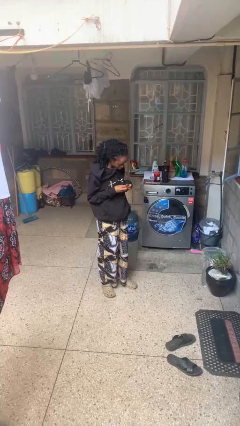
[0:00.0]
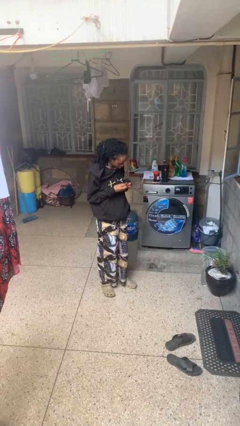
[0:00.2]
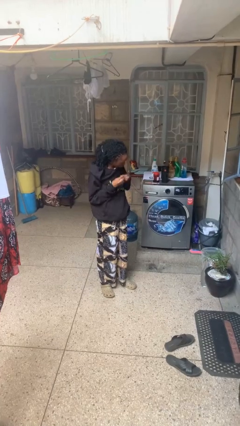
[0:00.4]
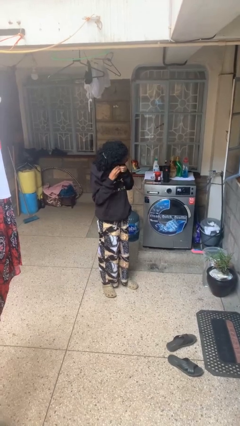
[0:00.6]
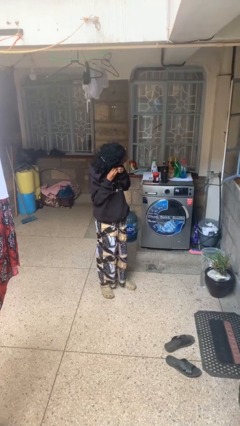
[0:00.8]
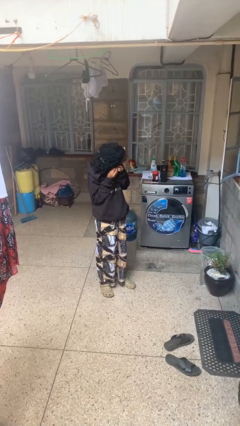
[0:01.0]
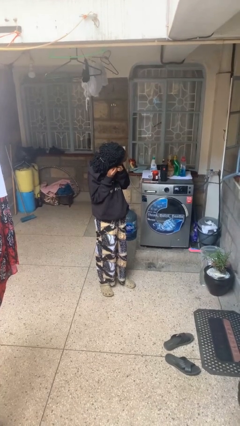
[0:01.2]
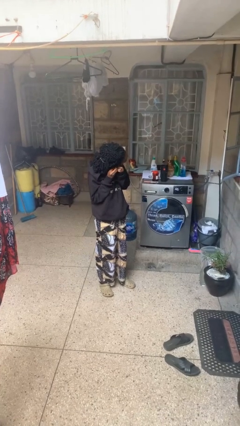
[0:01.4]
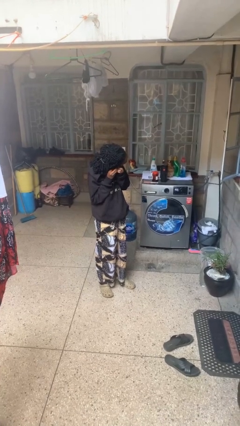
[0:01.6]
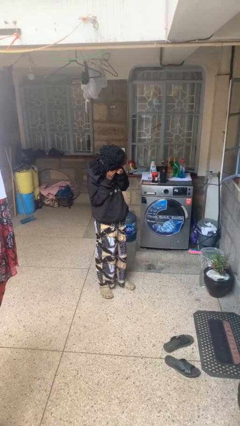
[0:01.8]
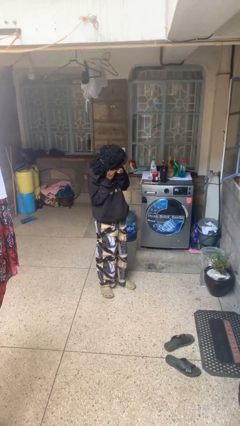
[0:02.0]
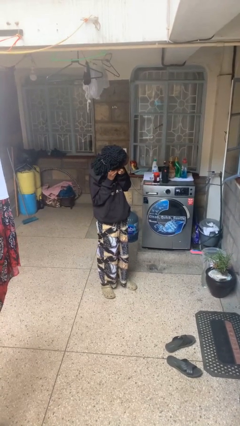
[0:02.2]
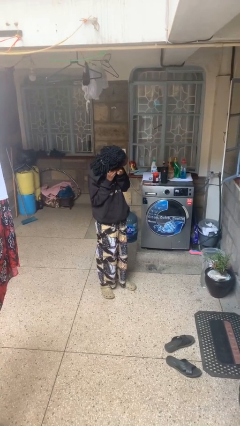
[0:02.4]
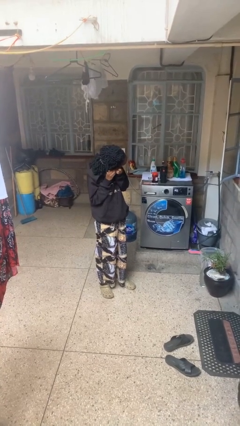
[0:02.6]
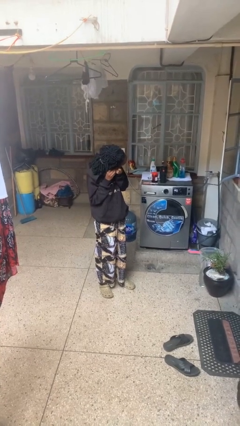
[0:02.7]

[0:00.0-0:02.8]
person puts on earrings

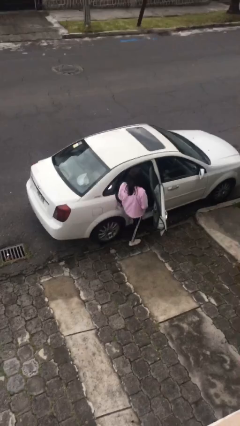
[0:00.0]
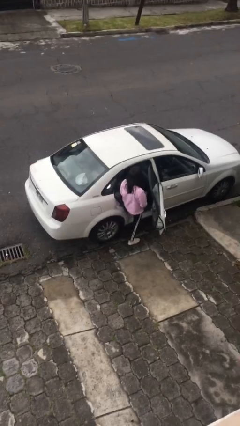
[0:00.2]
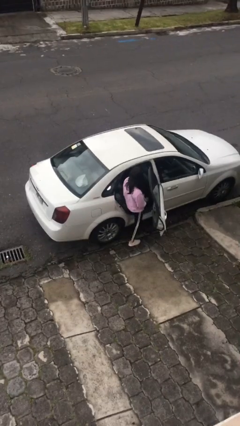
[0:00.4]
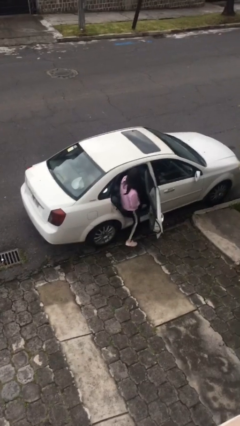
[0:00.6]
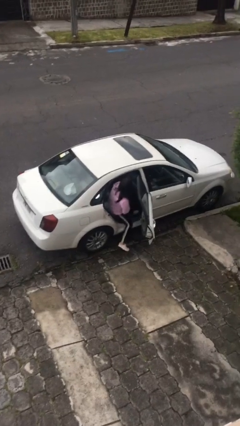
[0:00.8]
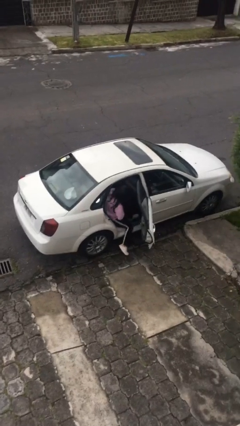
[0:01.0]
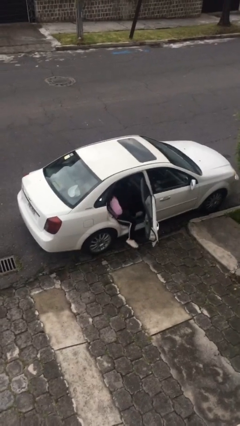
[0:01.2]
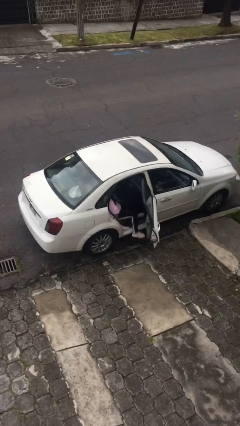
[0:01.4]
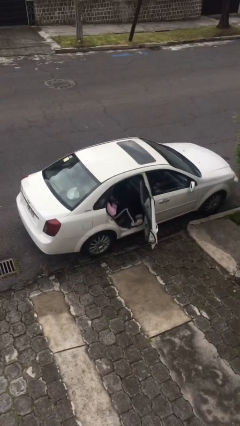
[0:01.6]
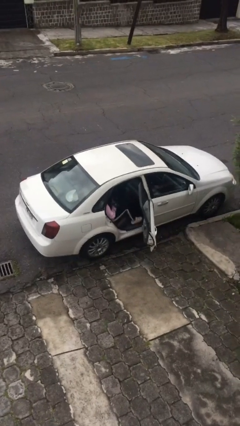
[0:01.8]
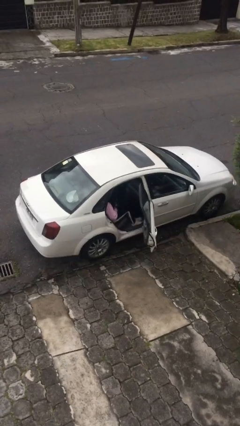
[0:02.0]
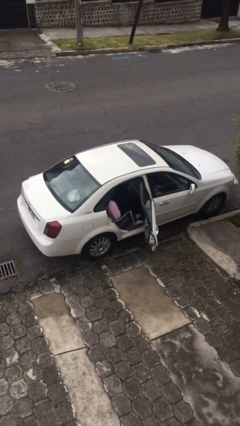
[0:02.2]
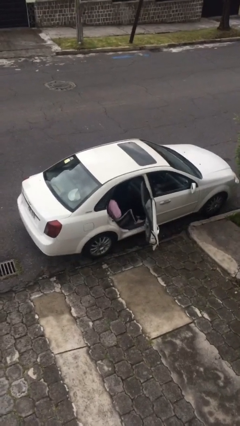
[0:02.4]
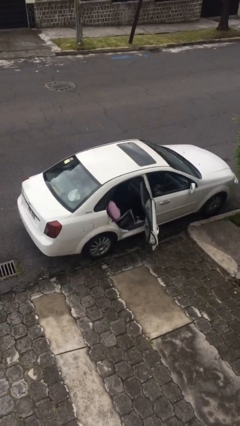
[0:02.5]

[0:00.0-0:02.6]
person enters car

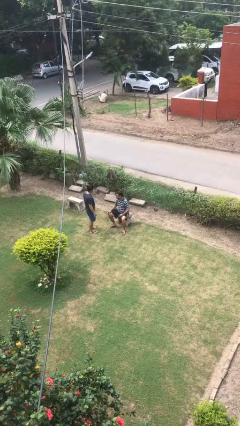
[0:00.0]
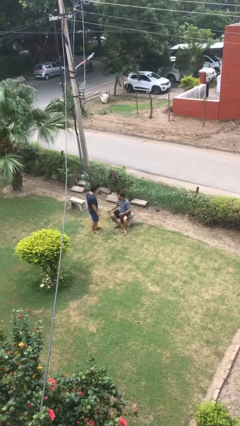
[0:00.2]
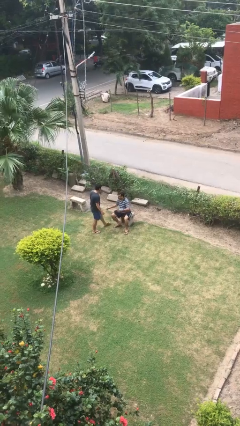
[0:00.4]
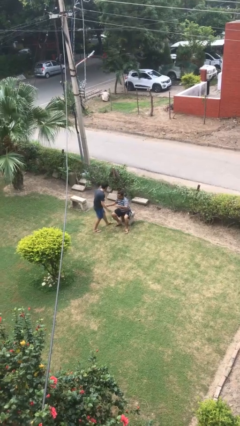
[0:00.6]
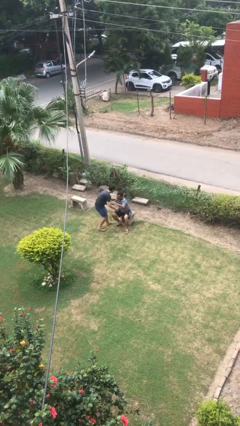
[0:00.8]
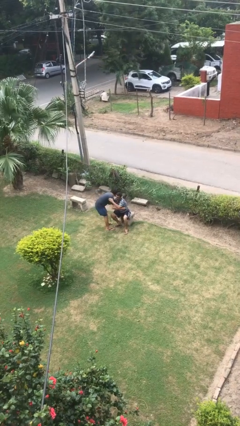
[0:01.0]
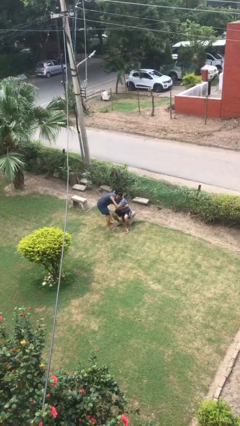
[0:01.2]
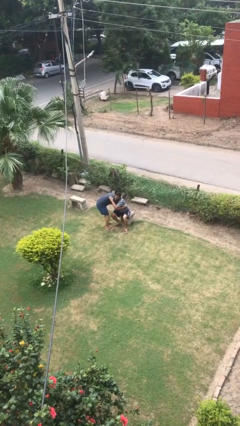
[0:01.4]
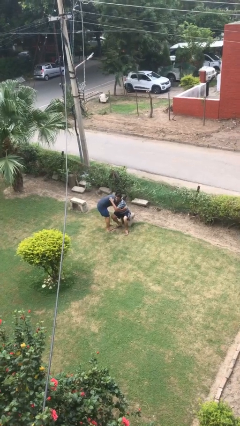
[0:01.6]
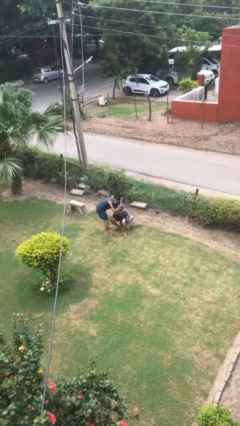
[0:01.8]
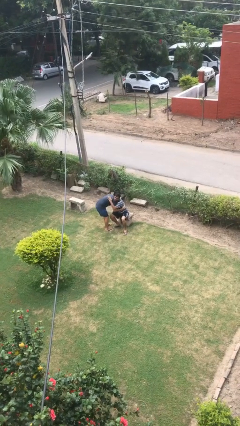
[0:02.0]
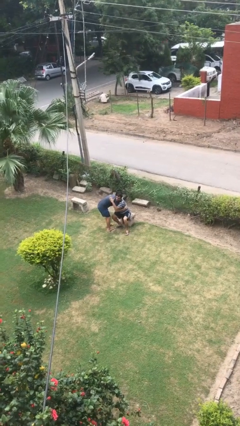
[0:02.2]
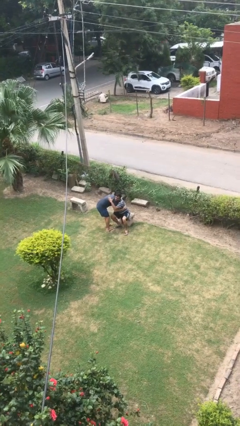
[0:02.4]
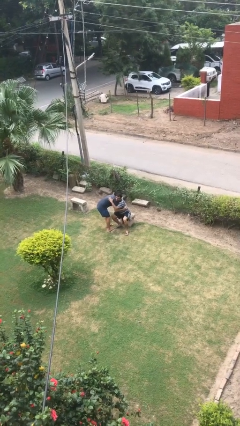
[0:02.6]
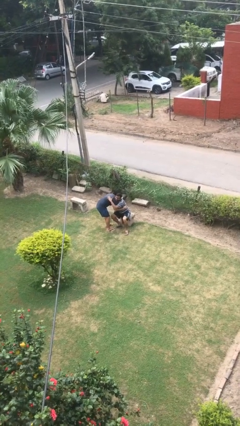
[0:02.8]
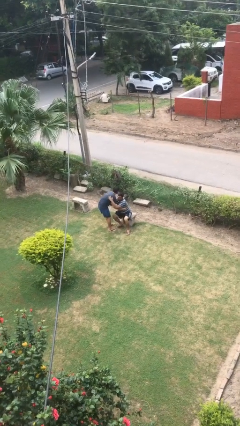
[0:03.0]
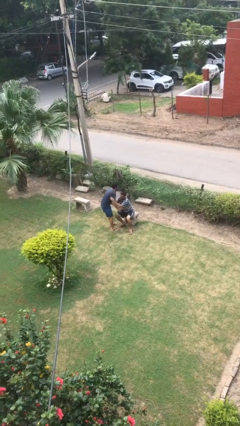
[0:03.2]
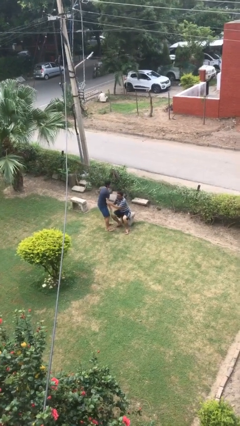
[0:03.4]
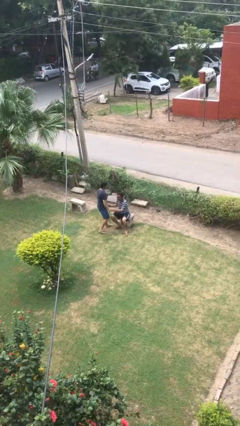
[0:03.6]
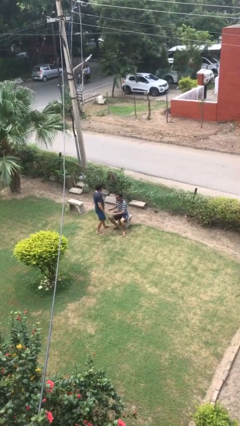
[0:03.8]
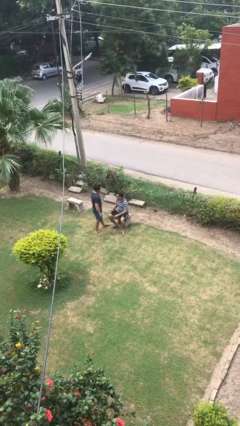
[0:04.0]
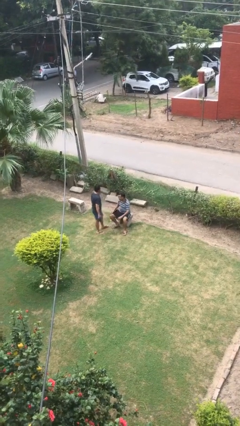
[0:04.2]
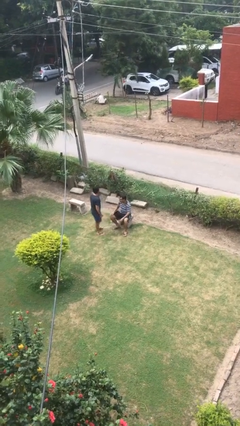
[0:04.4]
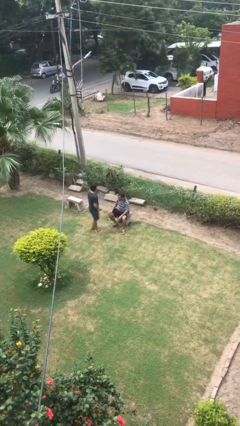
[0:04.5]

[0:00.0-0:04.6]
person embraces person

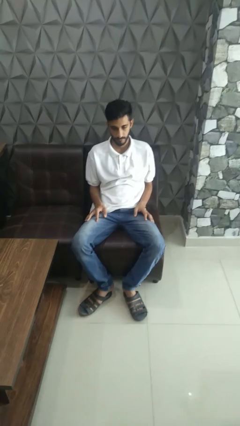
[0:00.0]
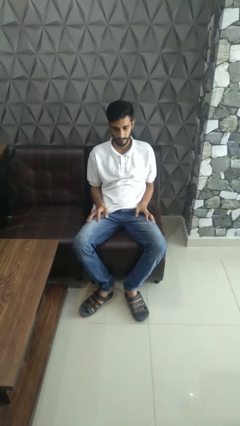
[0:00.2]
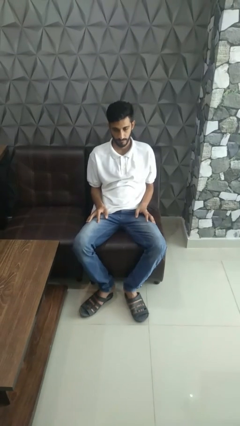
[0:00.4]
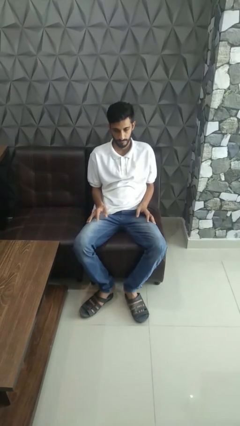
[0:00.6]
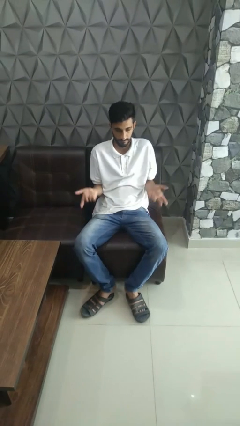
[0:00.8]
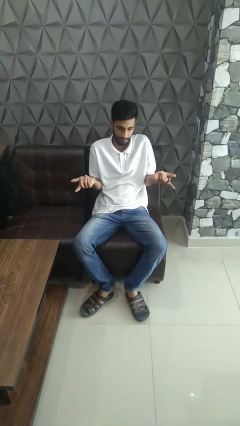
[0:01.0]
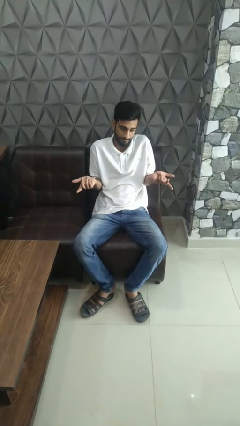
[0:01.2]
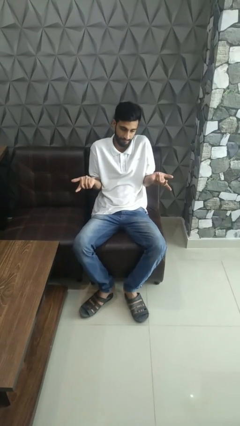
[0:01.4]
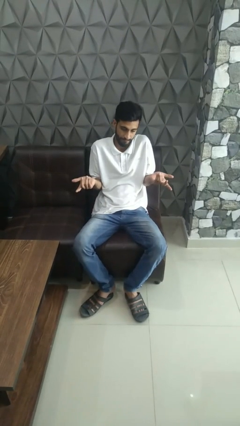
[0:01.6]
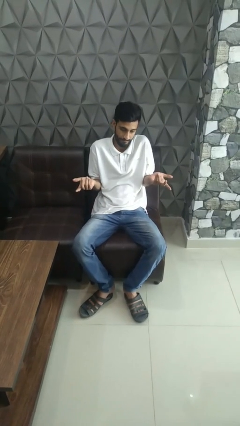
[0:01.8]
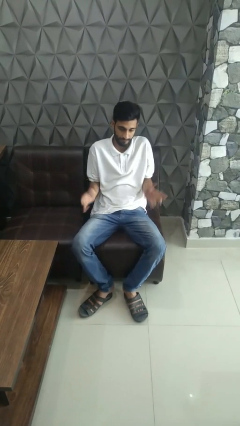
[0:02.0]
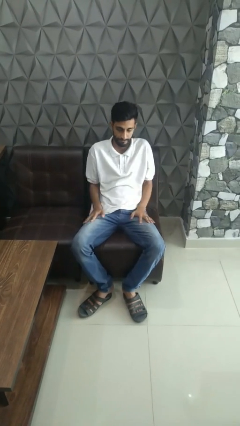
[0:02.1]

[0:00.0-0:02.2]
person shrugs

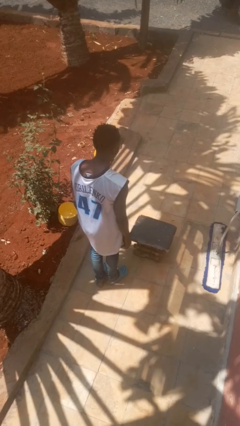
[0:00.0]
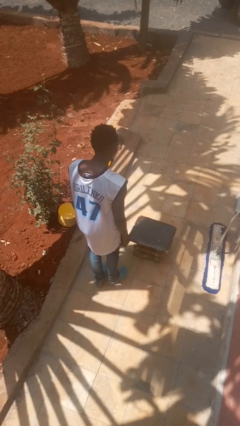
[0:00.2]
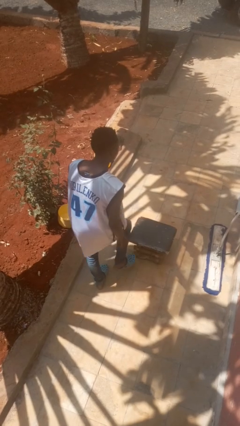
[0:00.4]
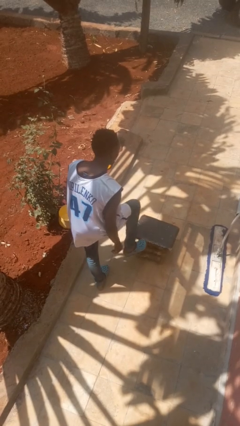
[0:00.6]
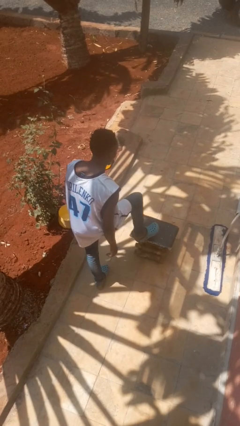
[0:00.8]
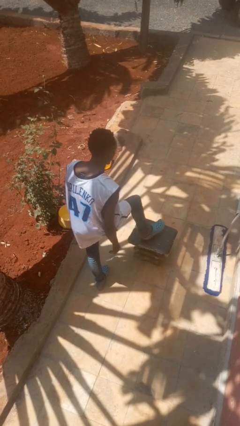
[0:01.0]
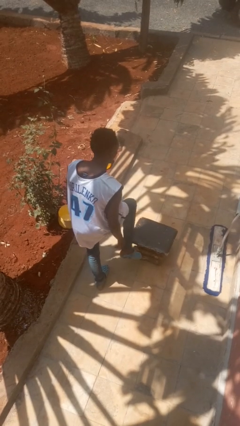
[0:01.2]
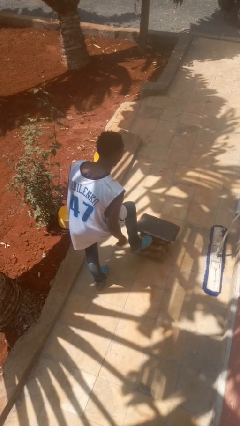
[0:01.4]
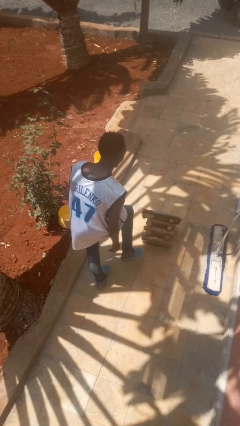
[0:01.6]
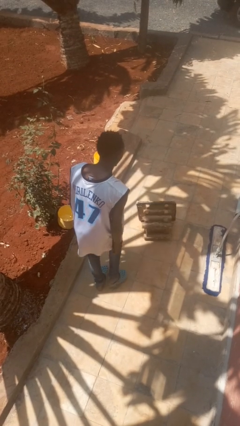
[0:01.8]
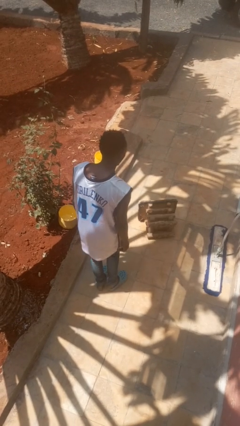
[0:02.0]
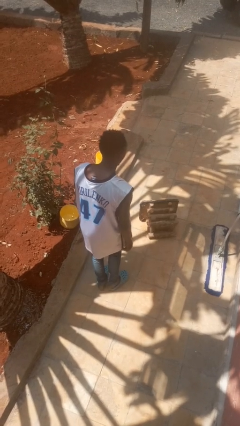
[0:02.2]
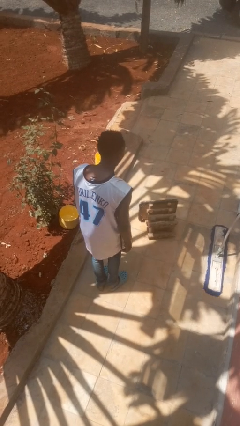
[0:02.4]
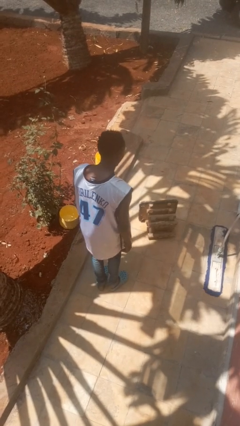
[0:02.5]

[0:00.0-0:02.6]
person knocks over furniture

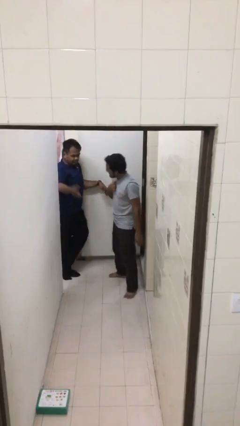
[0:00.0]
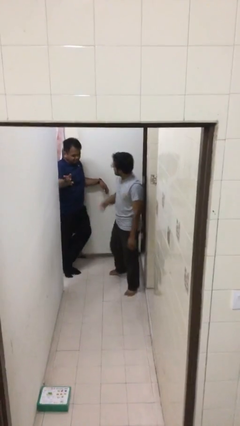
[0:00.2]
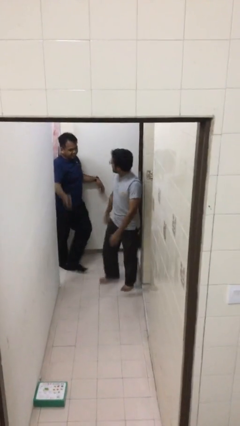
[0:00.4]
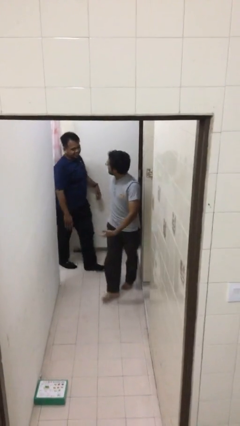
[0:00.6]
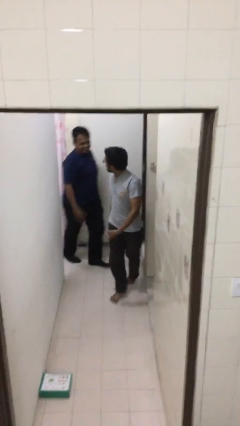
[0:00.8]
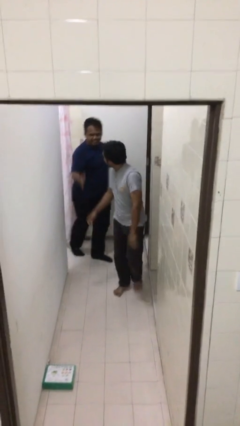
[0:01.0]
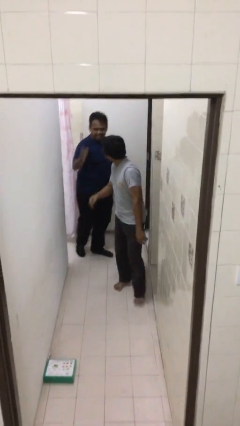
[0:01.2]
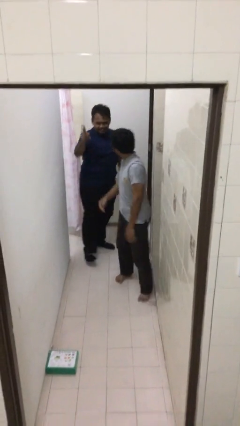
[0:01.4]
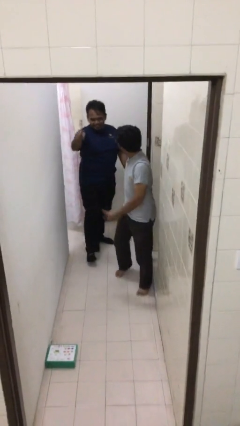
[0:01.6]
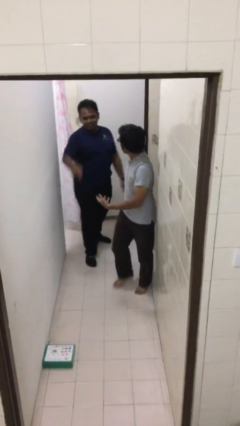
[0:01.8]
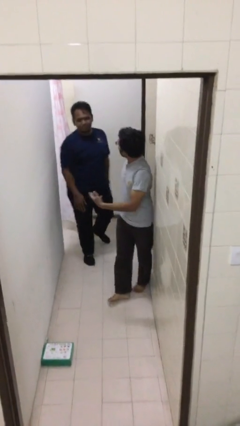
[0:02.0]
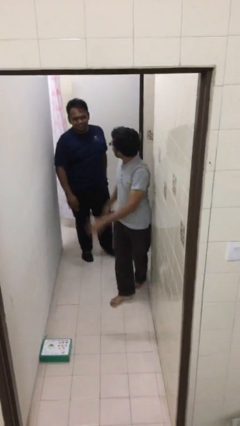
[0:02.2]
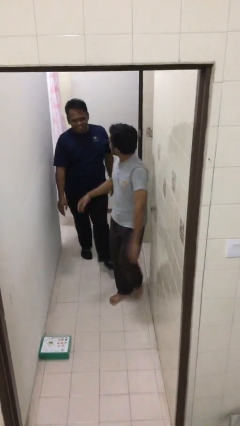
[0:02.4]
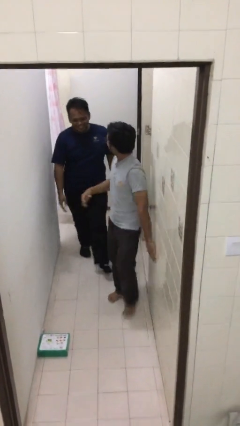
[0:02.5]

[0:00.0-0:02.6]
person talks to person

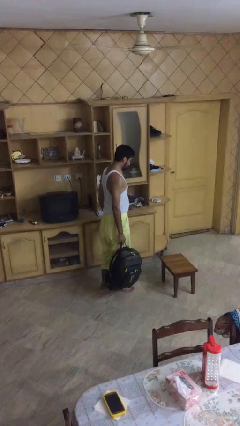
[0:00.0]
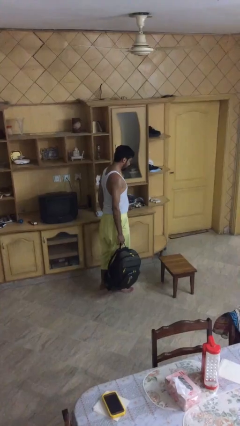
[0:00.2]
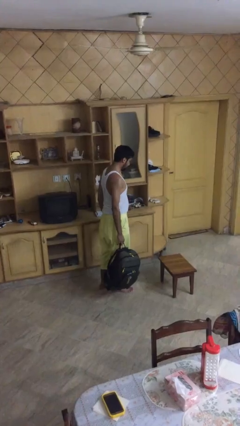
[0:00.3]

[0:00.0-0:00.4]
person puts down object on table
